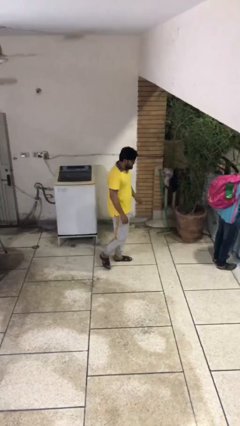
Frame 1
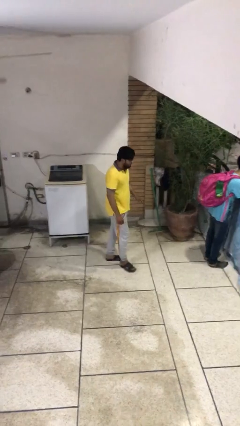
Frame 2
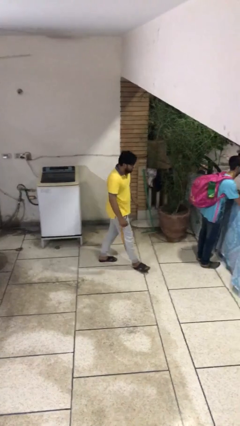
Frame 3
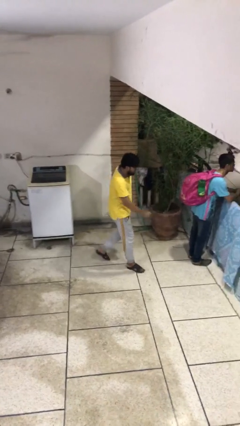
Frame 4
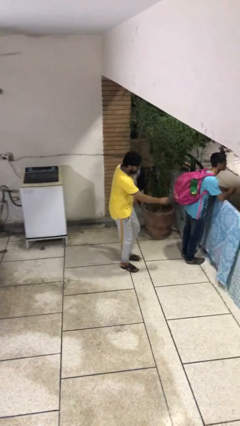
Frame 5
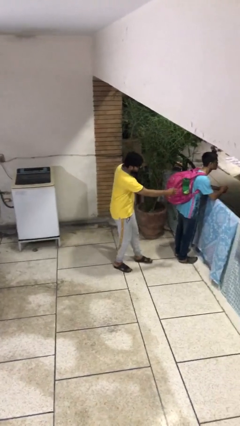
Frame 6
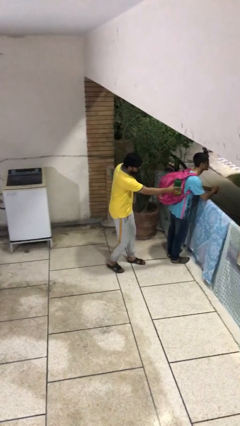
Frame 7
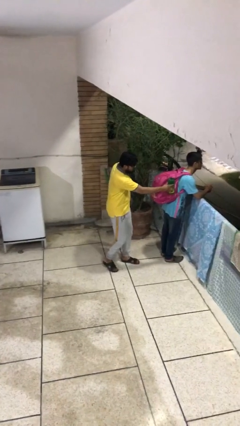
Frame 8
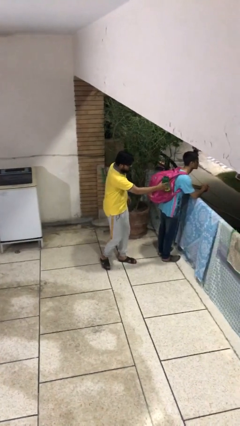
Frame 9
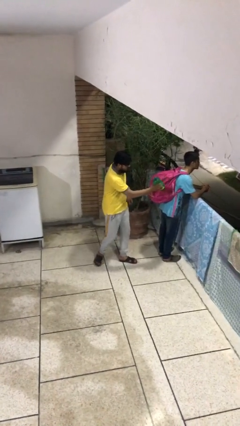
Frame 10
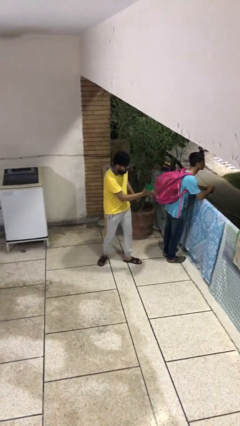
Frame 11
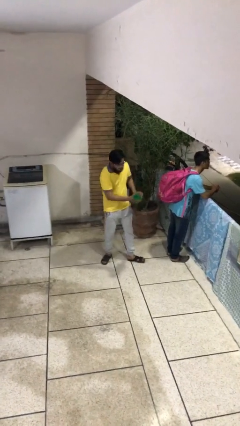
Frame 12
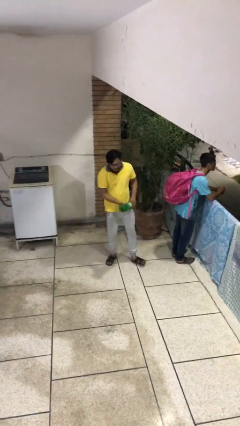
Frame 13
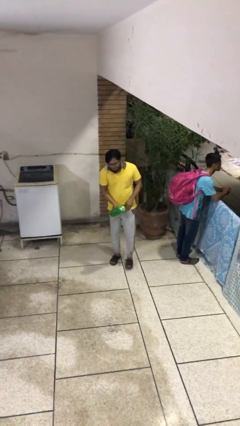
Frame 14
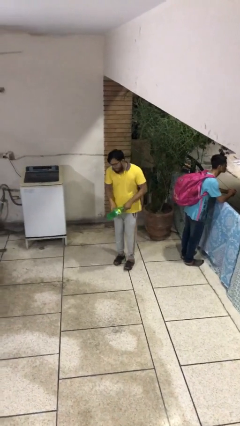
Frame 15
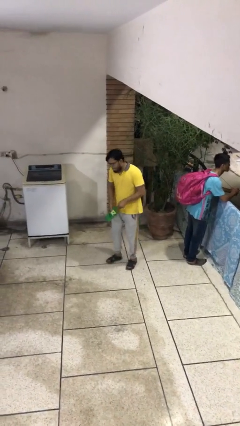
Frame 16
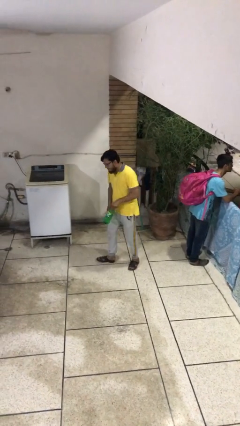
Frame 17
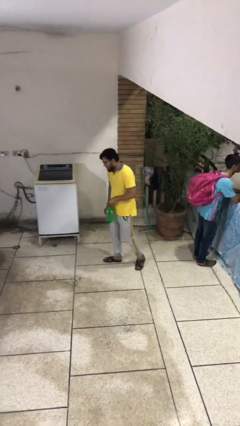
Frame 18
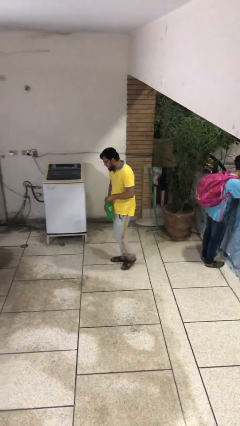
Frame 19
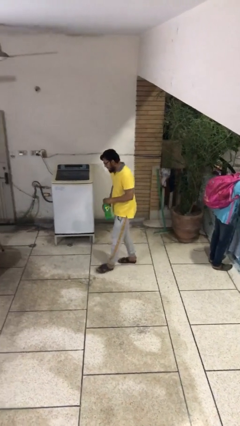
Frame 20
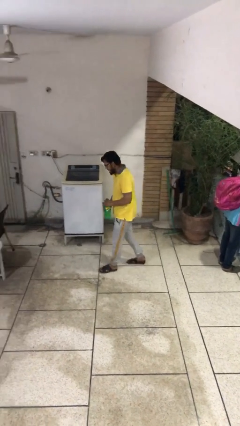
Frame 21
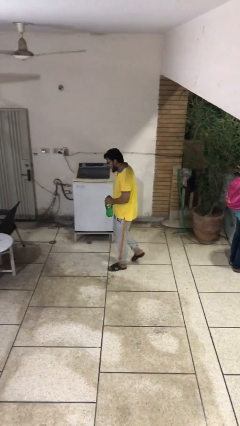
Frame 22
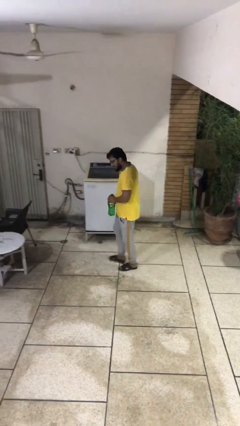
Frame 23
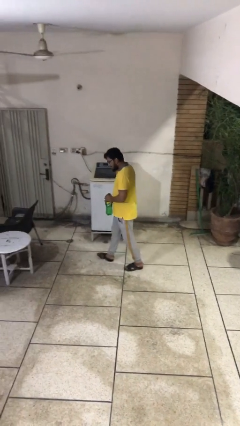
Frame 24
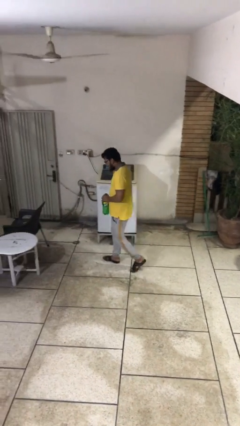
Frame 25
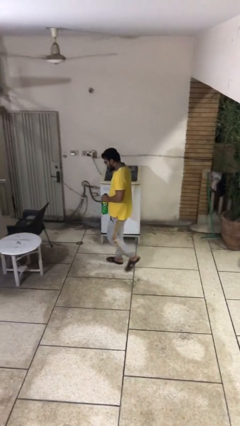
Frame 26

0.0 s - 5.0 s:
person steals object from person

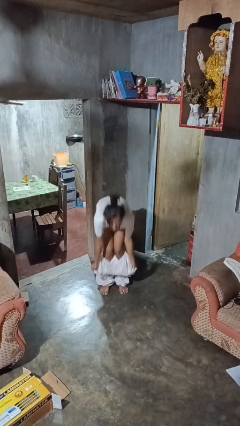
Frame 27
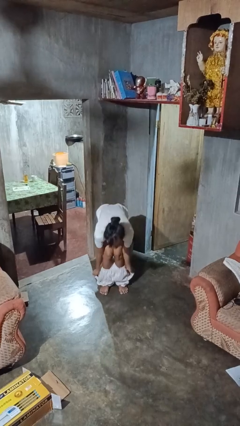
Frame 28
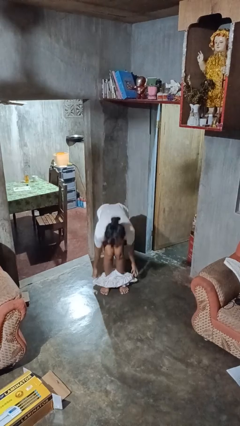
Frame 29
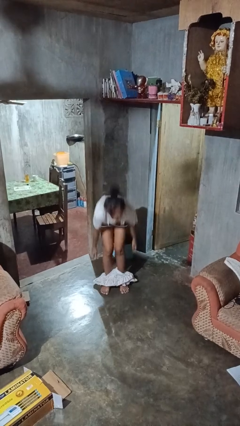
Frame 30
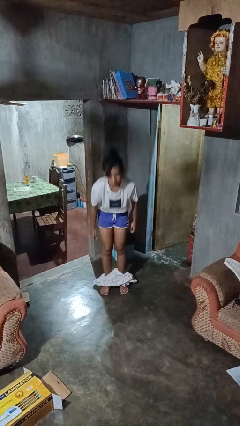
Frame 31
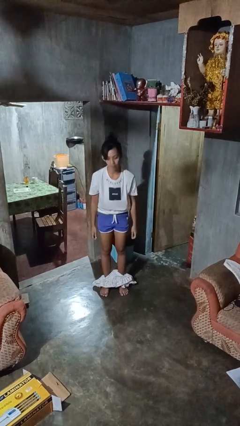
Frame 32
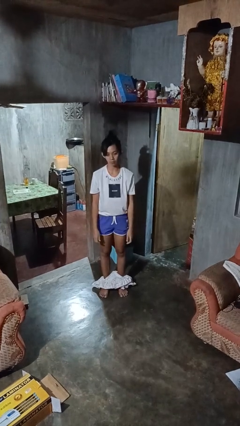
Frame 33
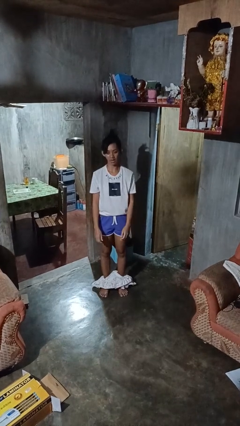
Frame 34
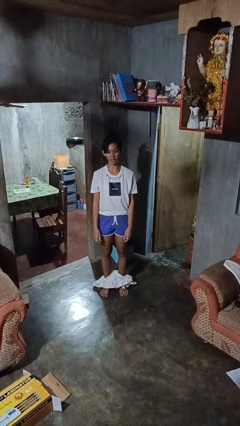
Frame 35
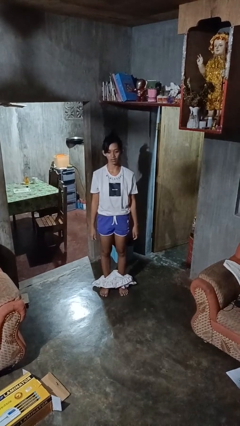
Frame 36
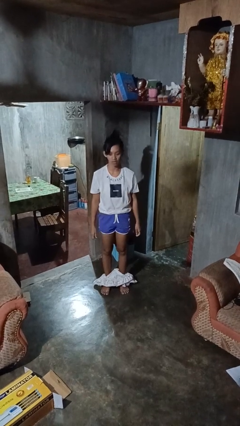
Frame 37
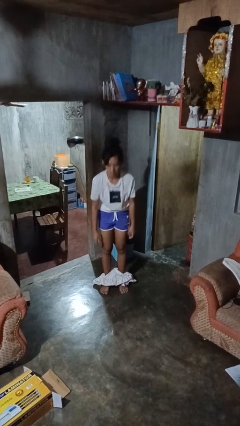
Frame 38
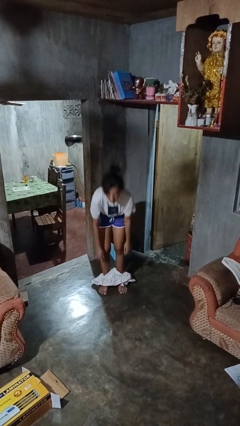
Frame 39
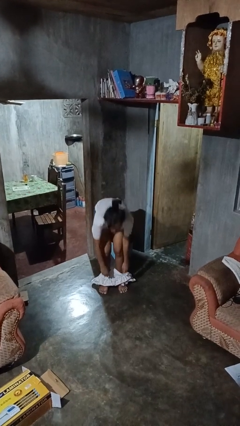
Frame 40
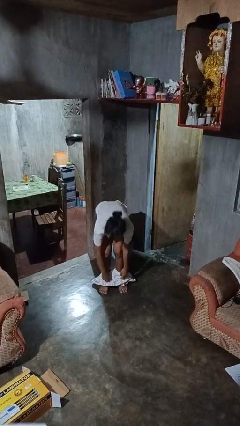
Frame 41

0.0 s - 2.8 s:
person takes off pants

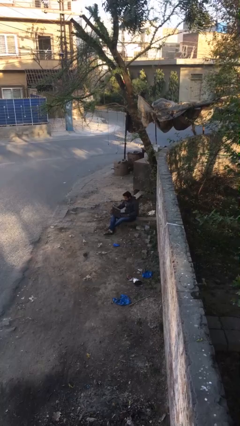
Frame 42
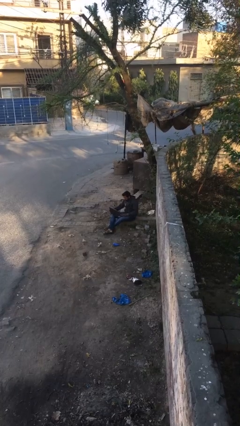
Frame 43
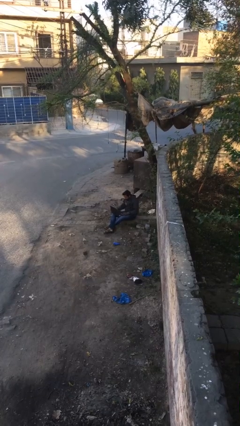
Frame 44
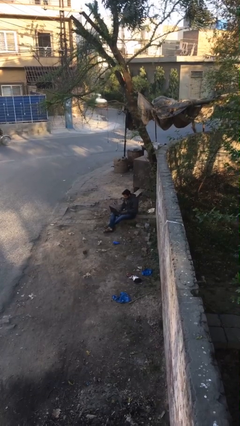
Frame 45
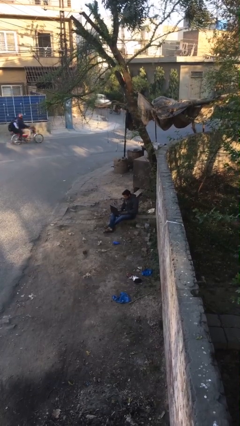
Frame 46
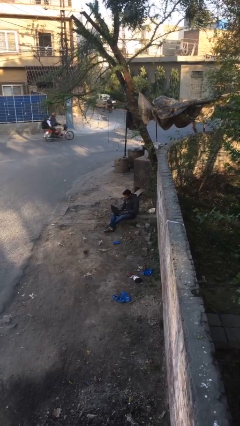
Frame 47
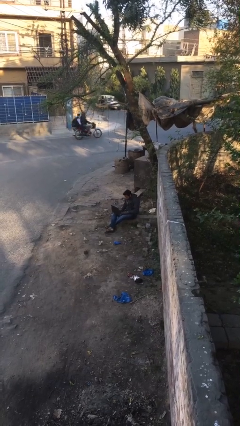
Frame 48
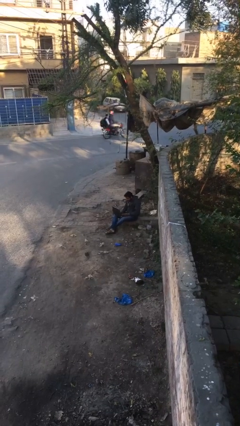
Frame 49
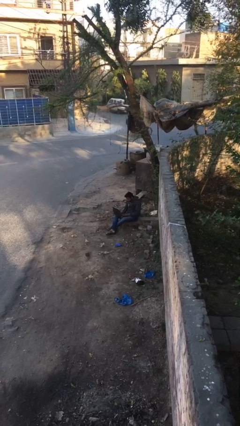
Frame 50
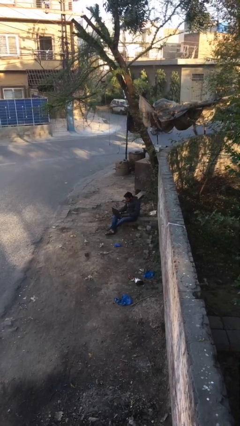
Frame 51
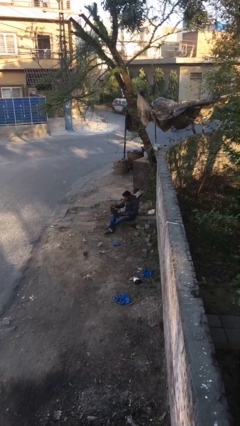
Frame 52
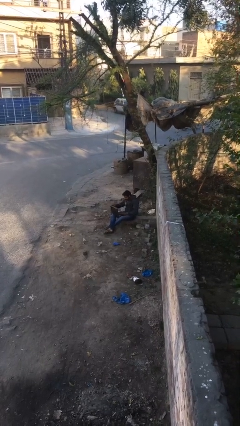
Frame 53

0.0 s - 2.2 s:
person interacts with laptop

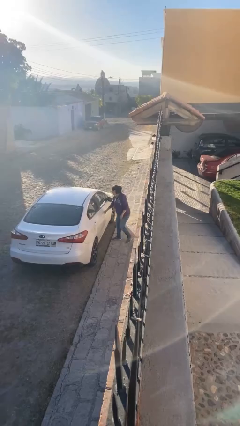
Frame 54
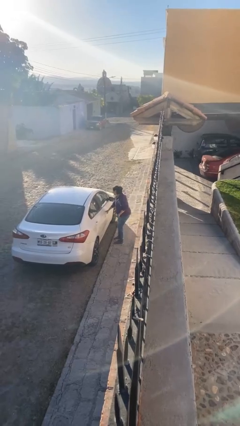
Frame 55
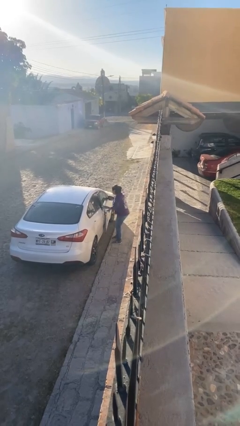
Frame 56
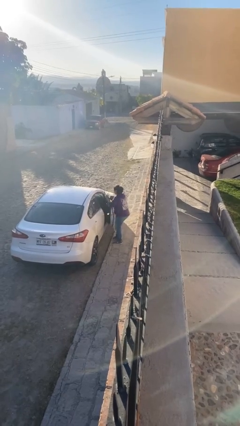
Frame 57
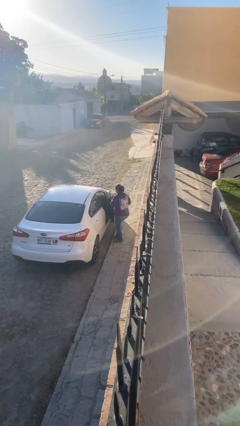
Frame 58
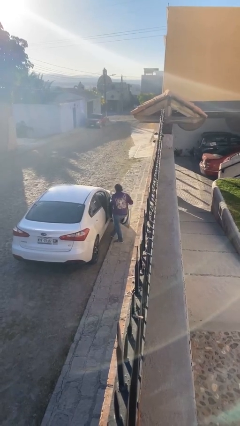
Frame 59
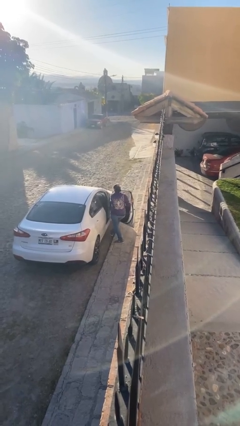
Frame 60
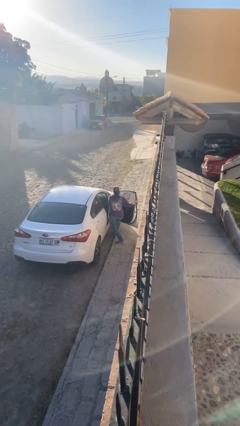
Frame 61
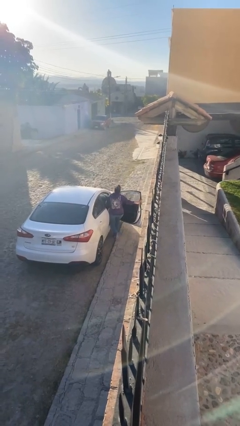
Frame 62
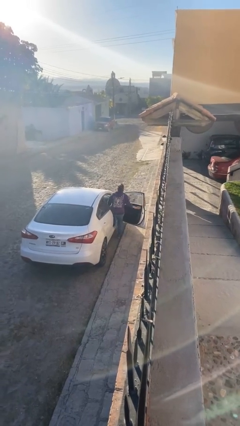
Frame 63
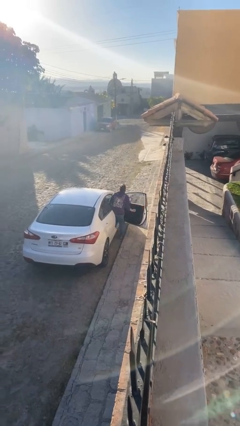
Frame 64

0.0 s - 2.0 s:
car picks up person

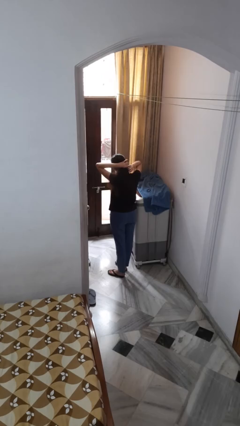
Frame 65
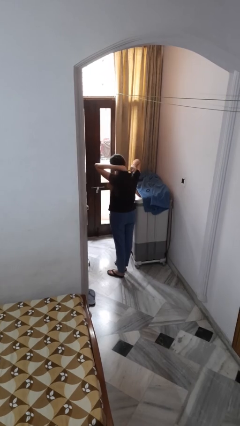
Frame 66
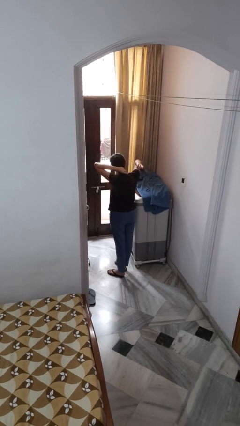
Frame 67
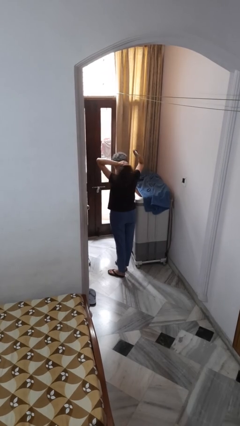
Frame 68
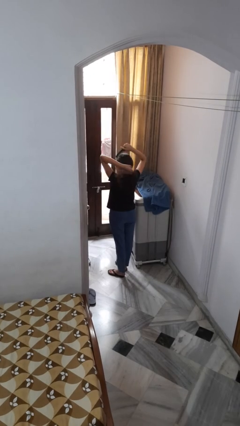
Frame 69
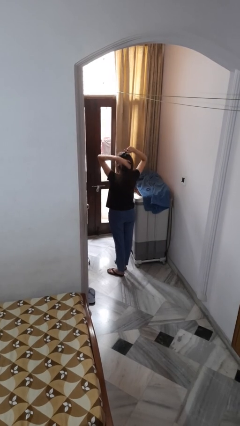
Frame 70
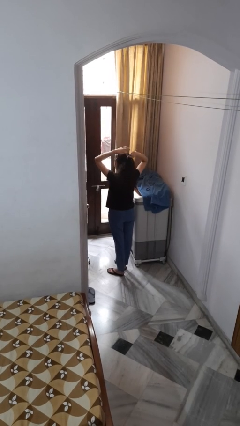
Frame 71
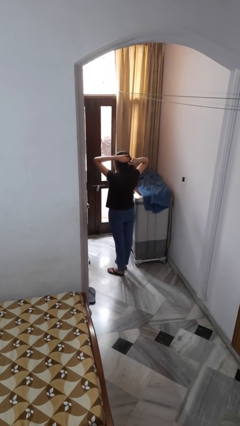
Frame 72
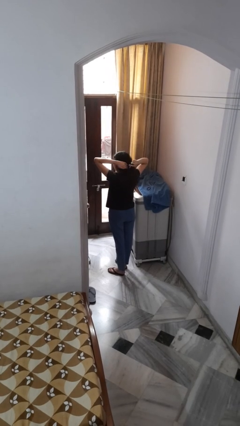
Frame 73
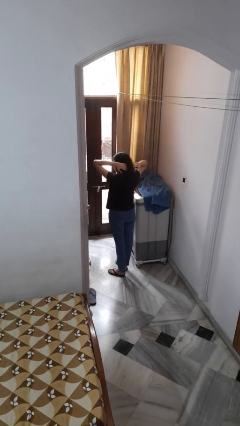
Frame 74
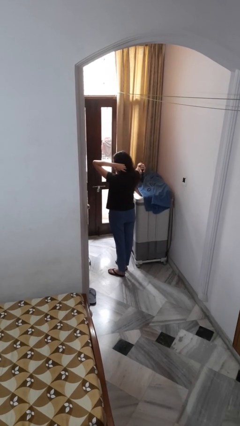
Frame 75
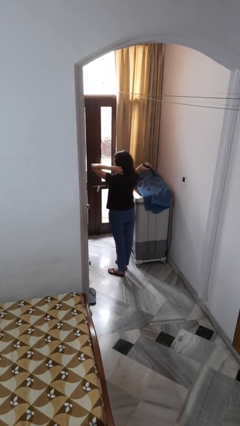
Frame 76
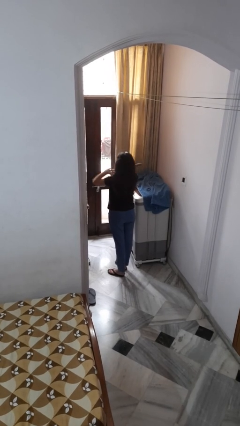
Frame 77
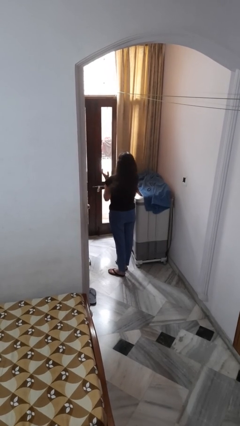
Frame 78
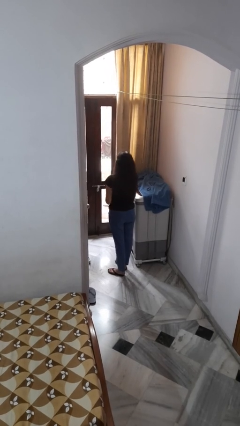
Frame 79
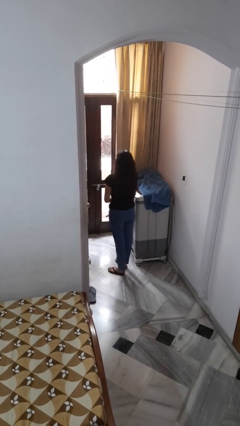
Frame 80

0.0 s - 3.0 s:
person brushes hair

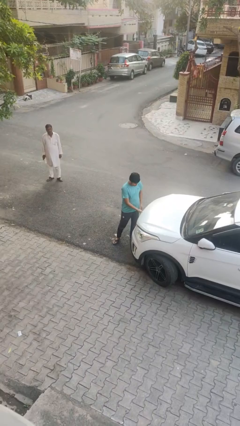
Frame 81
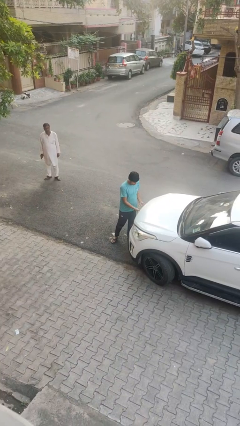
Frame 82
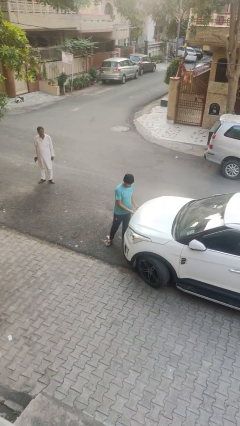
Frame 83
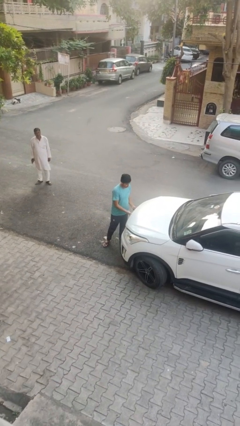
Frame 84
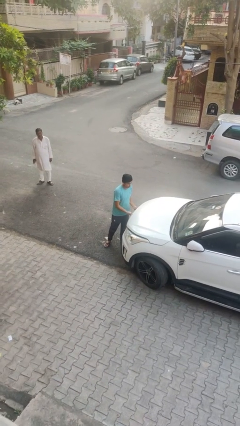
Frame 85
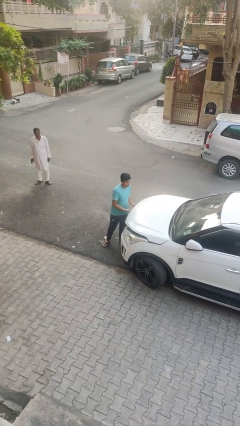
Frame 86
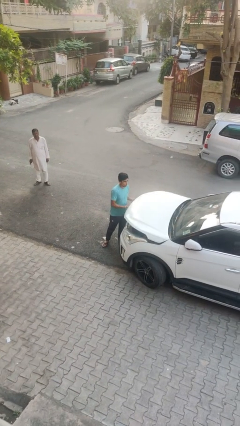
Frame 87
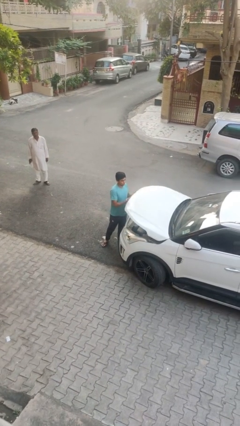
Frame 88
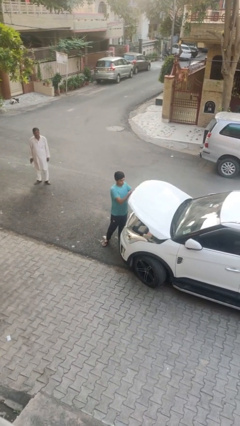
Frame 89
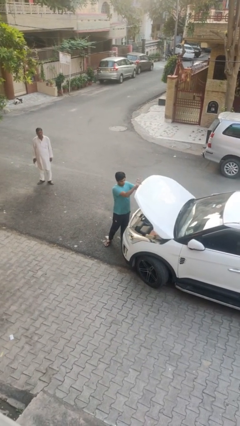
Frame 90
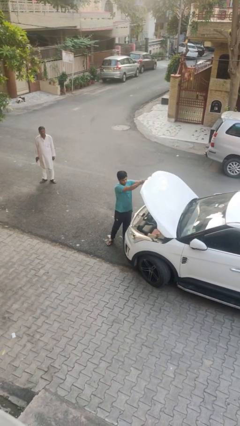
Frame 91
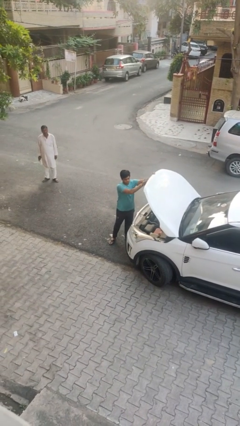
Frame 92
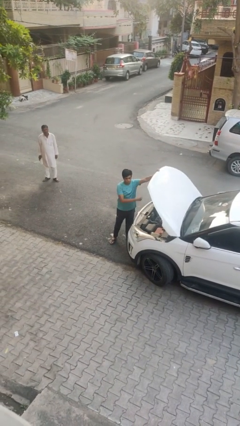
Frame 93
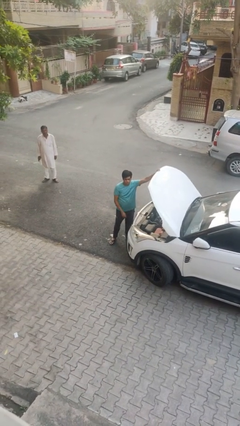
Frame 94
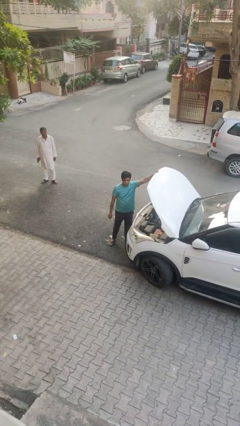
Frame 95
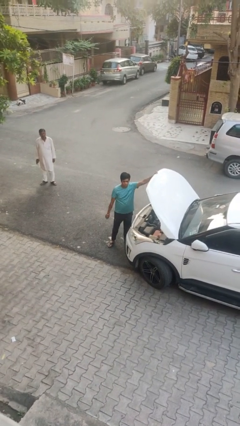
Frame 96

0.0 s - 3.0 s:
person opens car hood
